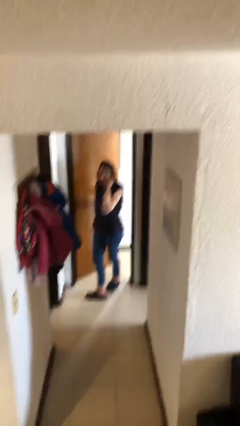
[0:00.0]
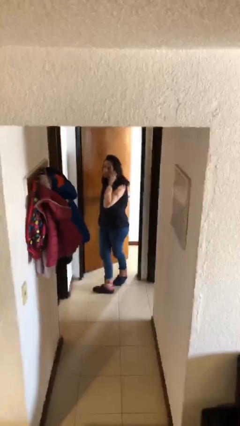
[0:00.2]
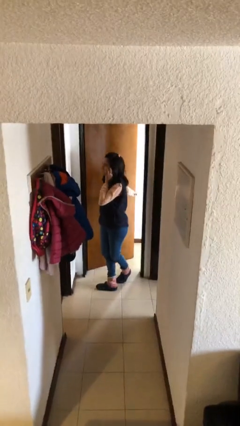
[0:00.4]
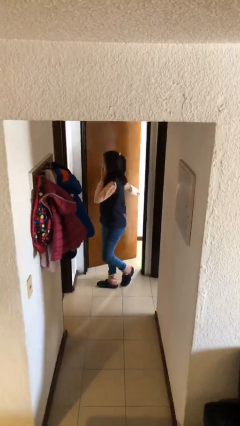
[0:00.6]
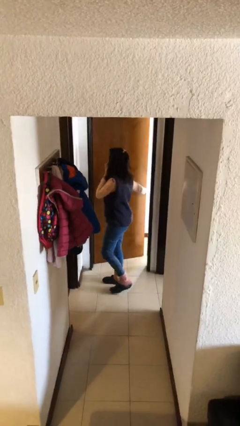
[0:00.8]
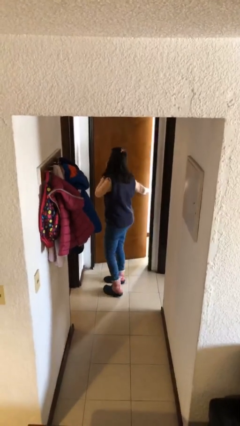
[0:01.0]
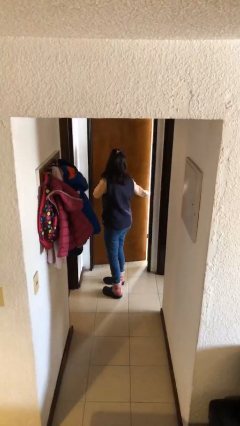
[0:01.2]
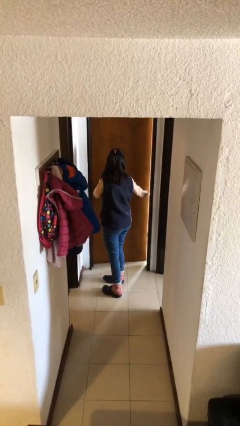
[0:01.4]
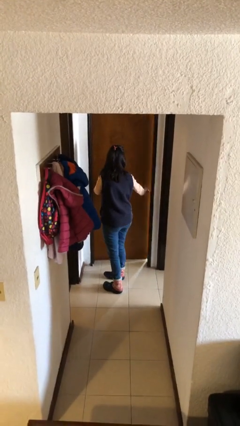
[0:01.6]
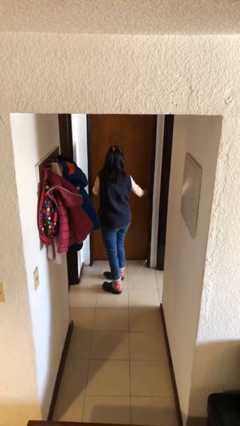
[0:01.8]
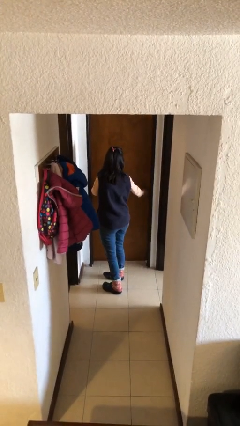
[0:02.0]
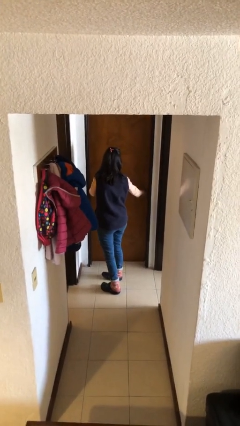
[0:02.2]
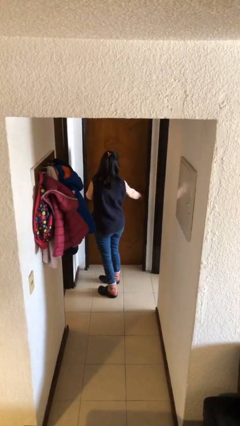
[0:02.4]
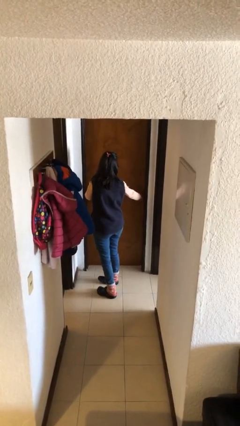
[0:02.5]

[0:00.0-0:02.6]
person closes facility door

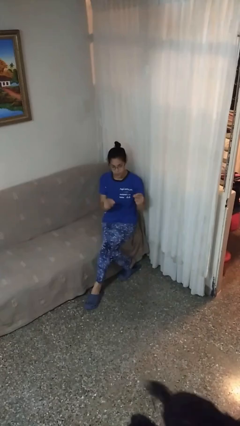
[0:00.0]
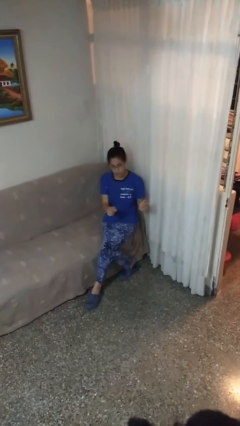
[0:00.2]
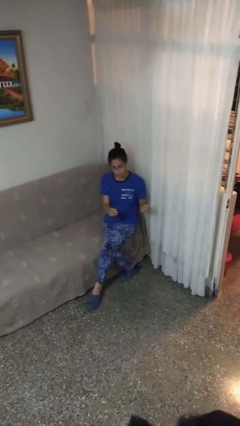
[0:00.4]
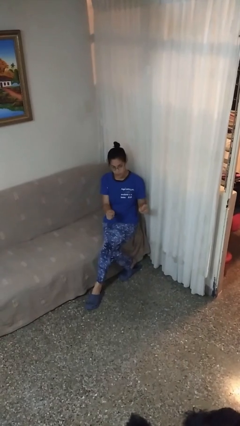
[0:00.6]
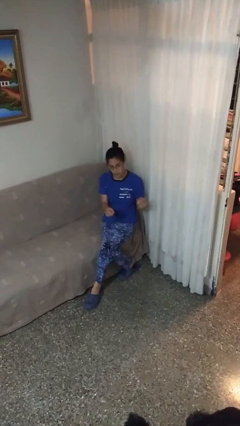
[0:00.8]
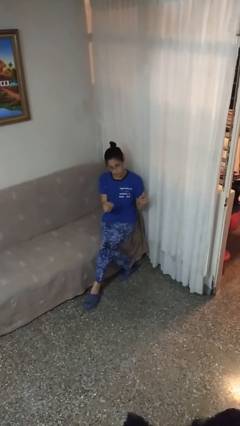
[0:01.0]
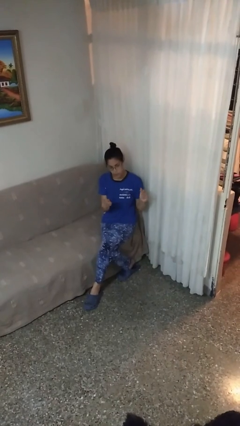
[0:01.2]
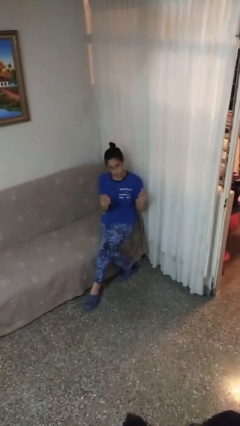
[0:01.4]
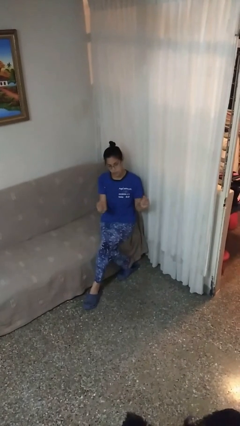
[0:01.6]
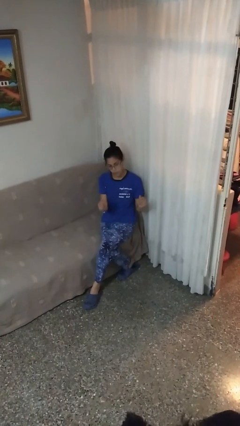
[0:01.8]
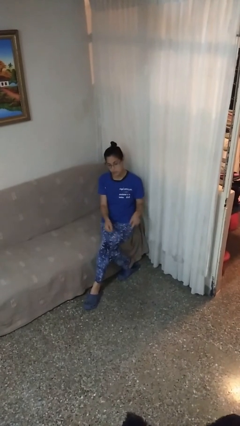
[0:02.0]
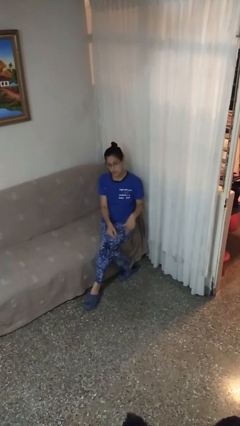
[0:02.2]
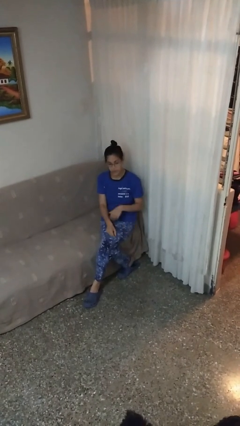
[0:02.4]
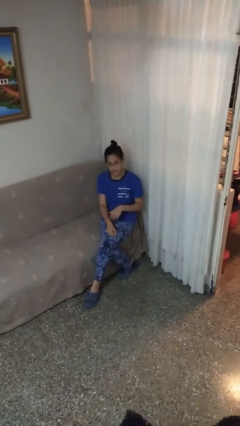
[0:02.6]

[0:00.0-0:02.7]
person snaps fingers

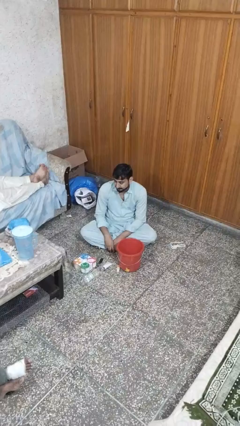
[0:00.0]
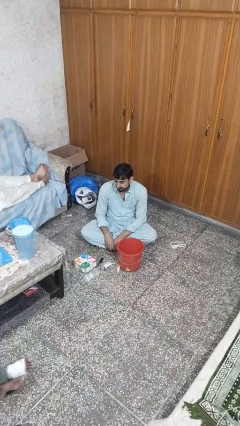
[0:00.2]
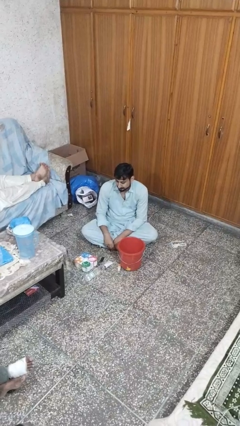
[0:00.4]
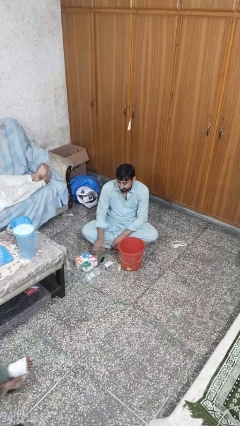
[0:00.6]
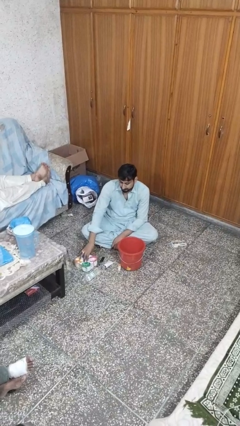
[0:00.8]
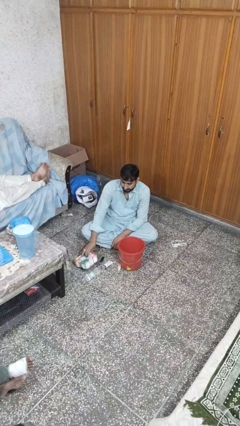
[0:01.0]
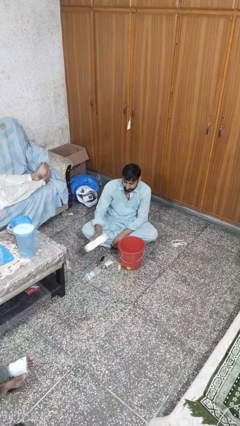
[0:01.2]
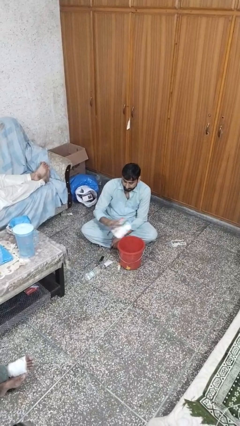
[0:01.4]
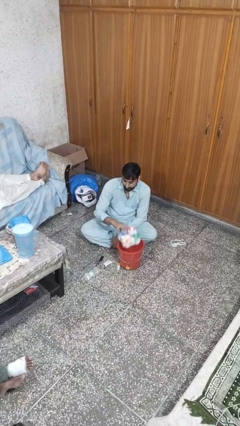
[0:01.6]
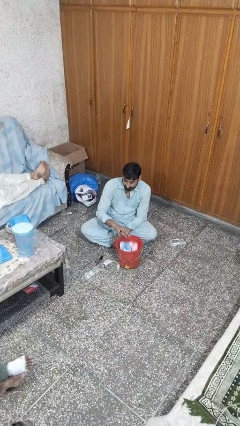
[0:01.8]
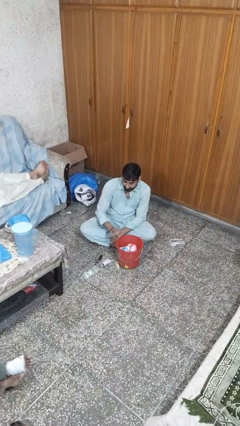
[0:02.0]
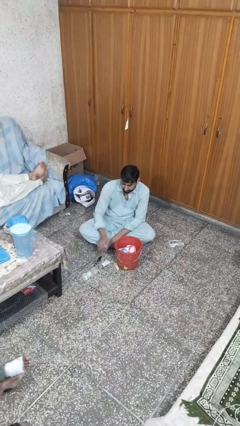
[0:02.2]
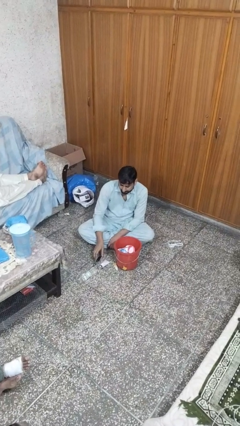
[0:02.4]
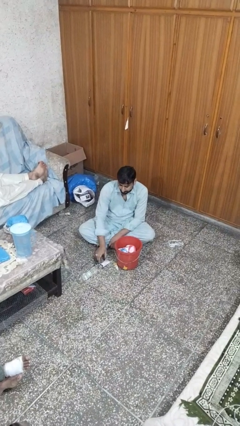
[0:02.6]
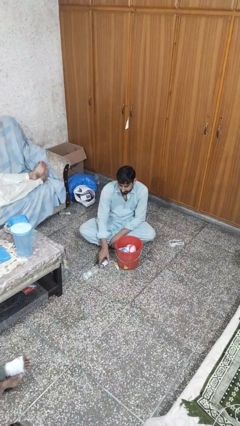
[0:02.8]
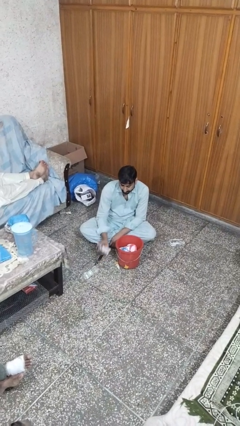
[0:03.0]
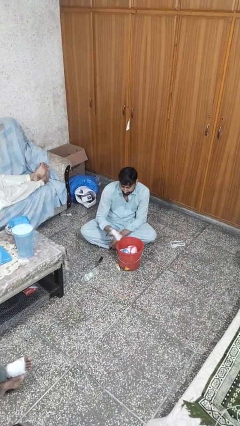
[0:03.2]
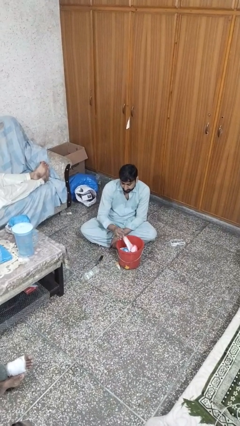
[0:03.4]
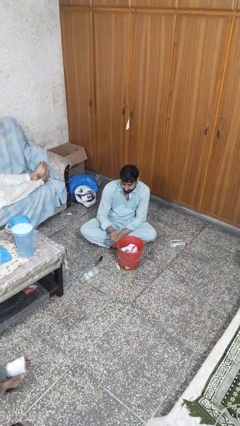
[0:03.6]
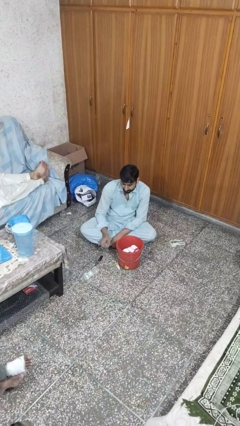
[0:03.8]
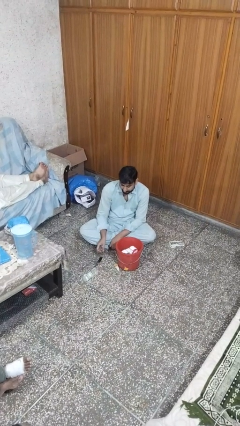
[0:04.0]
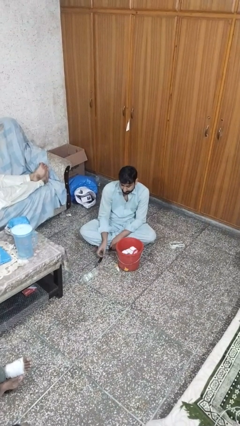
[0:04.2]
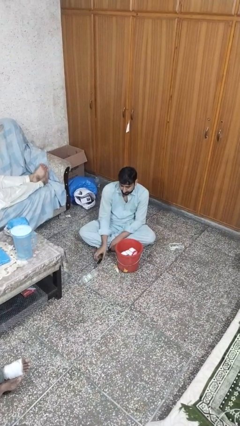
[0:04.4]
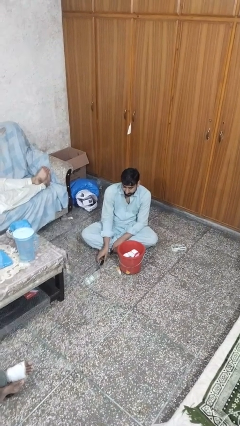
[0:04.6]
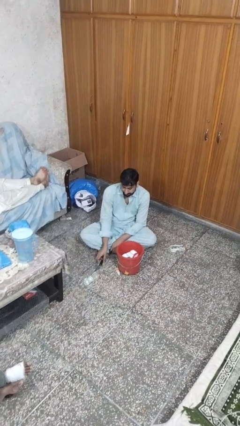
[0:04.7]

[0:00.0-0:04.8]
person puts object into basket

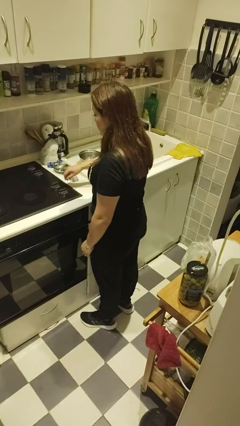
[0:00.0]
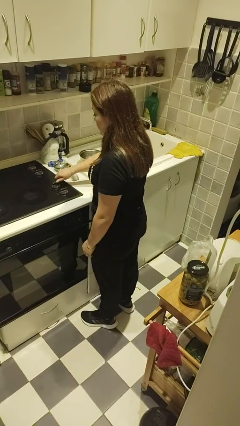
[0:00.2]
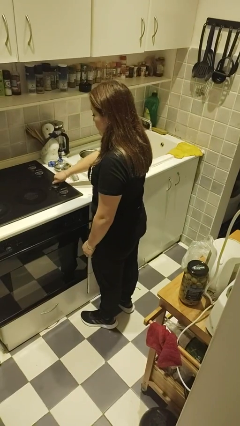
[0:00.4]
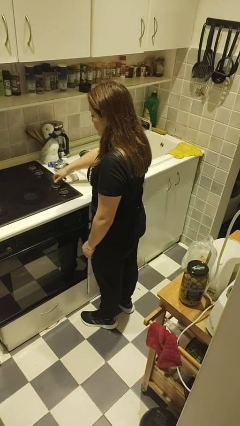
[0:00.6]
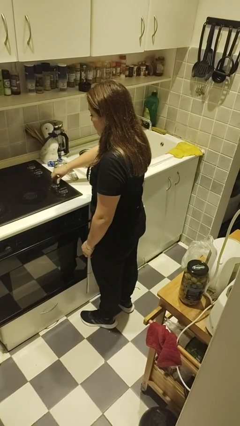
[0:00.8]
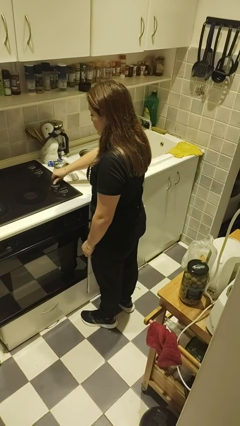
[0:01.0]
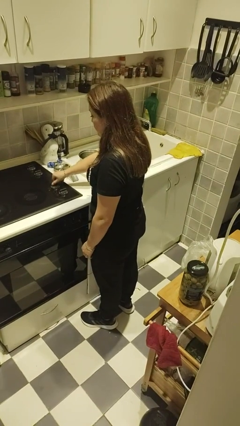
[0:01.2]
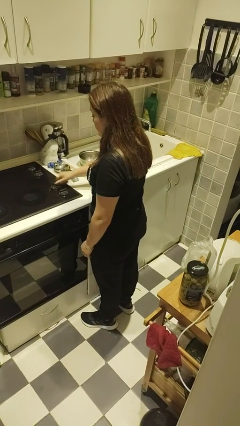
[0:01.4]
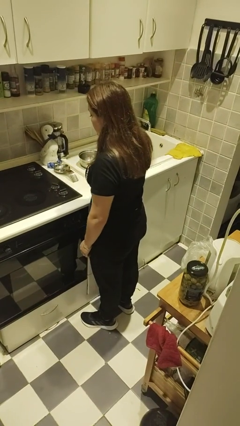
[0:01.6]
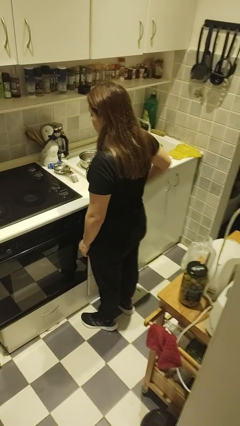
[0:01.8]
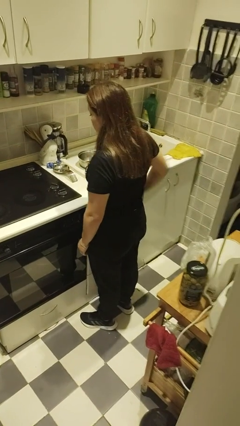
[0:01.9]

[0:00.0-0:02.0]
person turns on stovetop

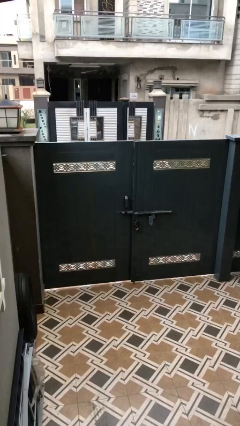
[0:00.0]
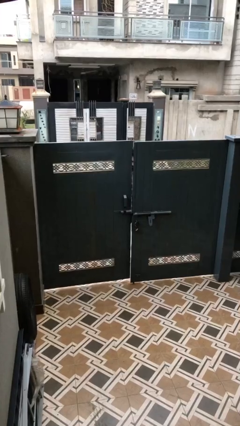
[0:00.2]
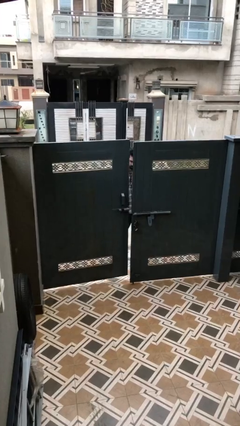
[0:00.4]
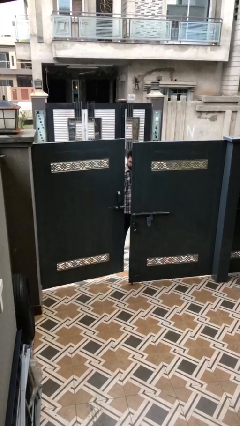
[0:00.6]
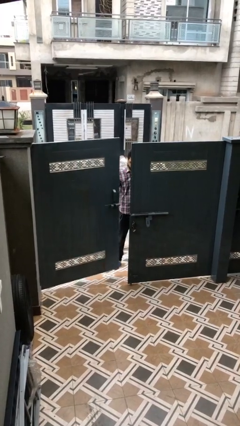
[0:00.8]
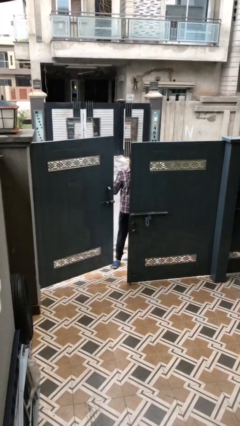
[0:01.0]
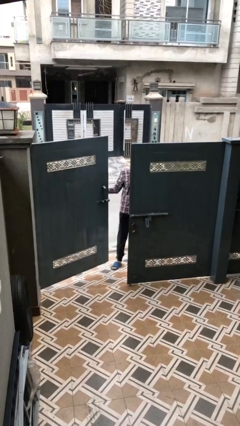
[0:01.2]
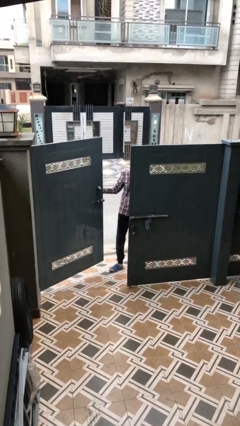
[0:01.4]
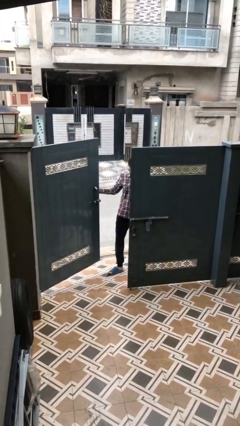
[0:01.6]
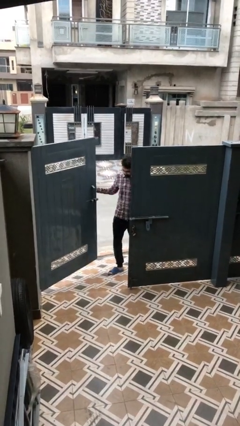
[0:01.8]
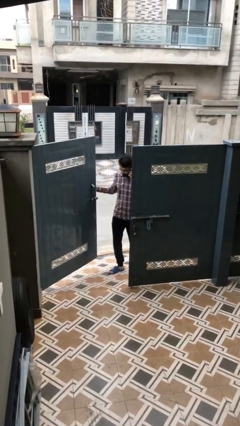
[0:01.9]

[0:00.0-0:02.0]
person opens facility door

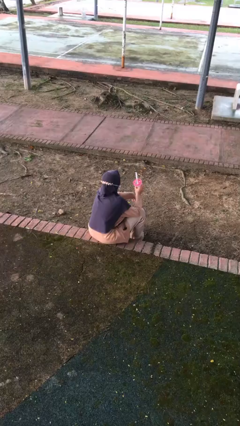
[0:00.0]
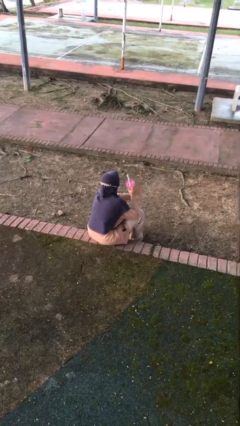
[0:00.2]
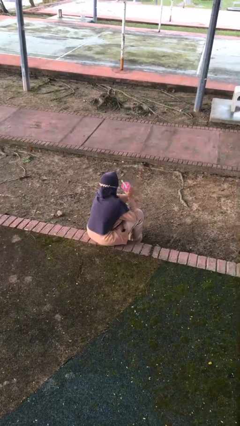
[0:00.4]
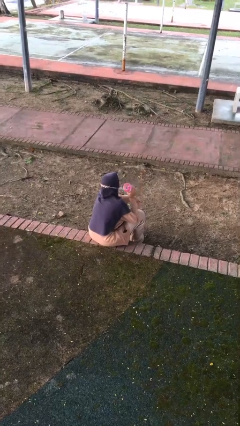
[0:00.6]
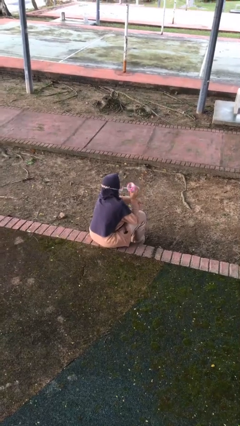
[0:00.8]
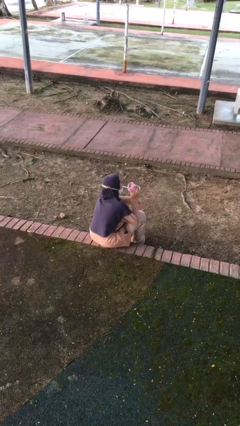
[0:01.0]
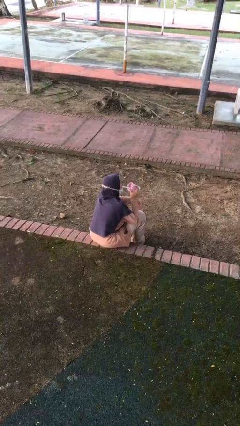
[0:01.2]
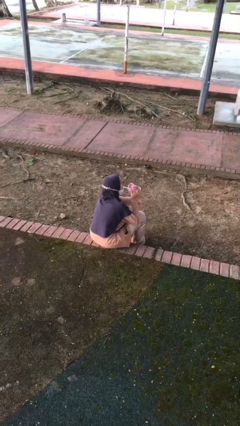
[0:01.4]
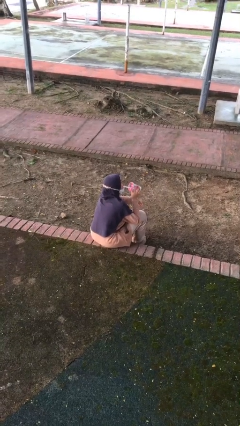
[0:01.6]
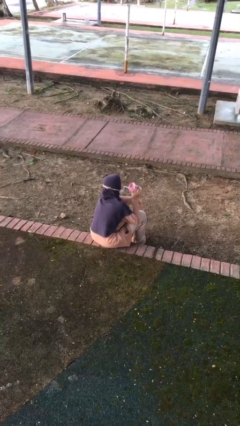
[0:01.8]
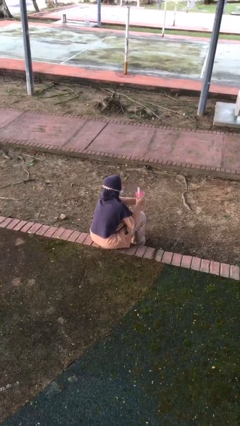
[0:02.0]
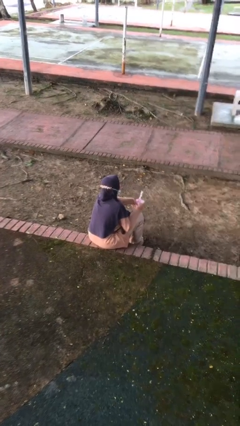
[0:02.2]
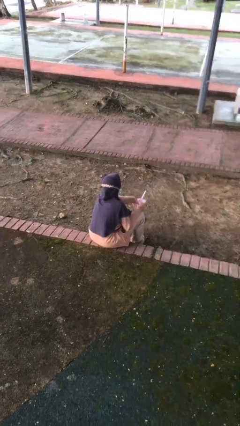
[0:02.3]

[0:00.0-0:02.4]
person drinks from straw

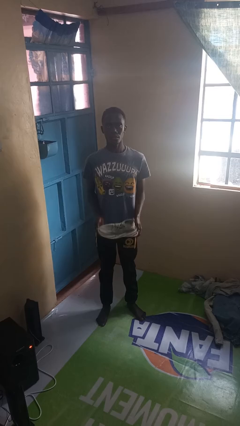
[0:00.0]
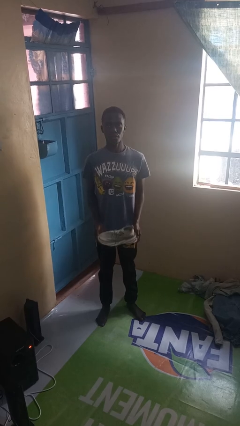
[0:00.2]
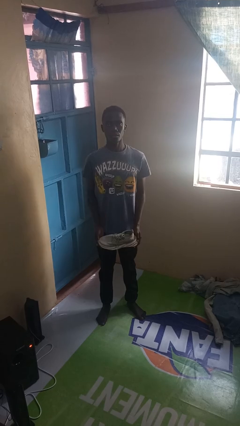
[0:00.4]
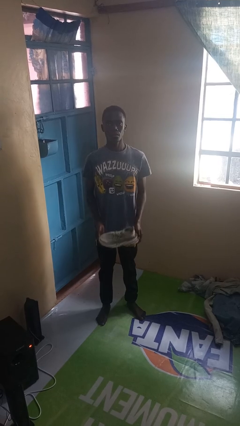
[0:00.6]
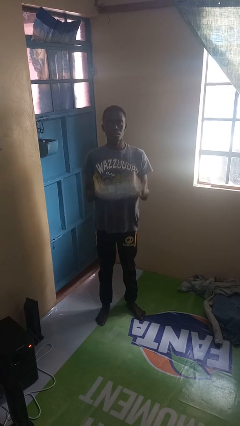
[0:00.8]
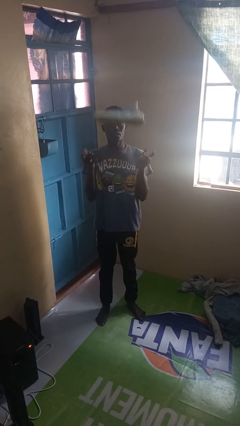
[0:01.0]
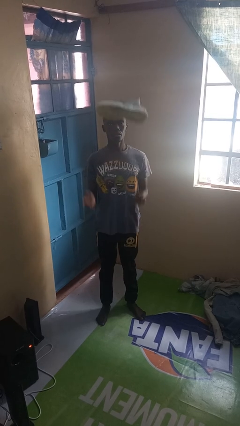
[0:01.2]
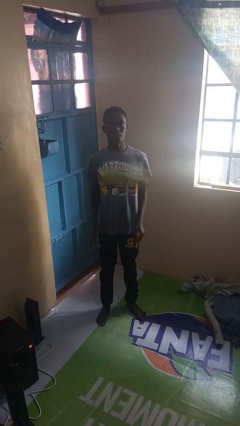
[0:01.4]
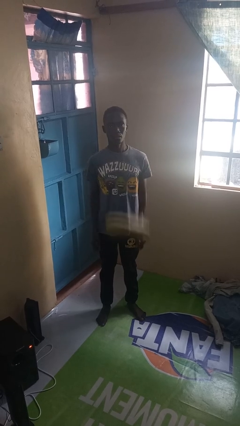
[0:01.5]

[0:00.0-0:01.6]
person throws object into air
